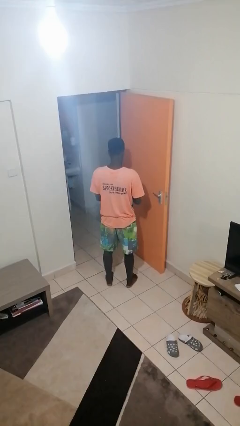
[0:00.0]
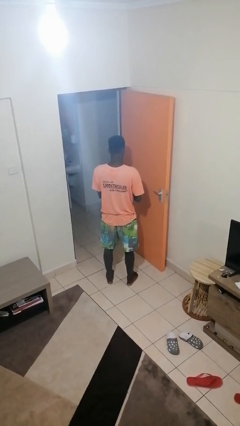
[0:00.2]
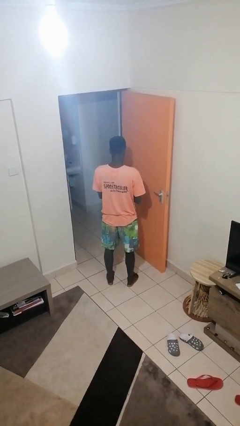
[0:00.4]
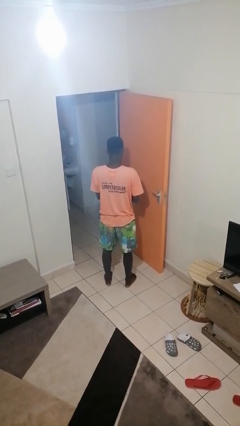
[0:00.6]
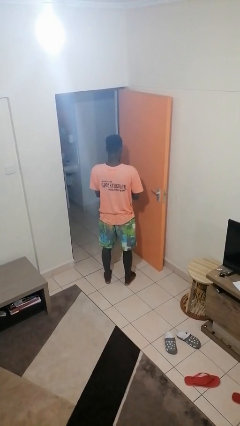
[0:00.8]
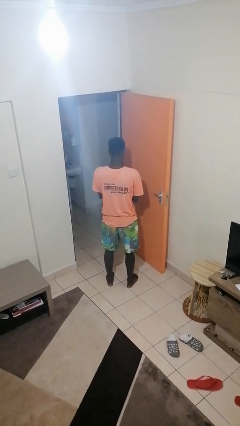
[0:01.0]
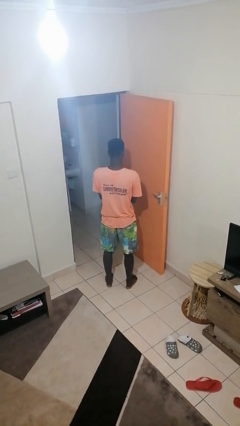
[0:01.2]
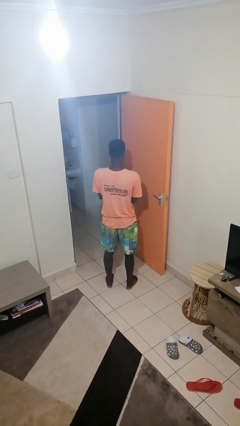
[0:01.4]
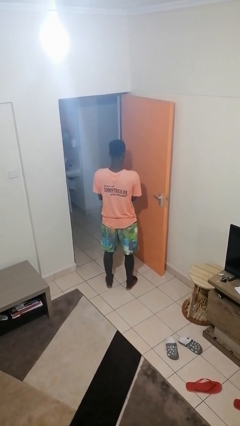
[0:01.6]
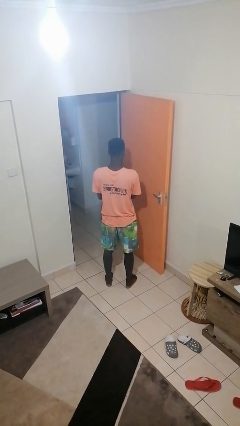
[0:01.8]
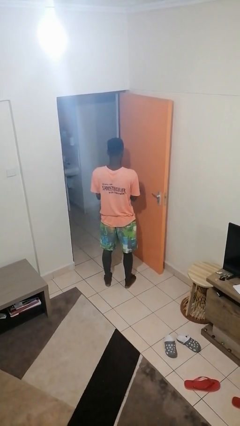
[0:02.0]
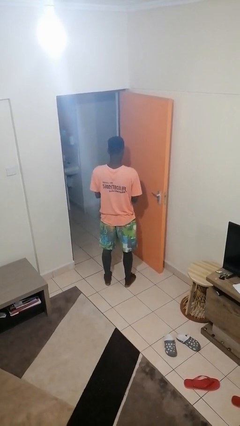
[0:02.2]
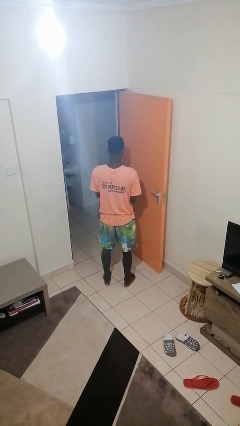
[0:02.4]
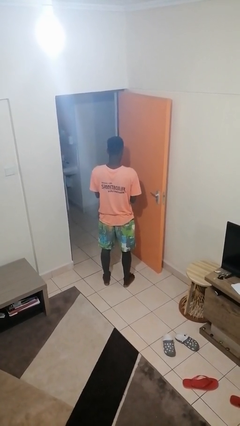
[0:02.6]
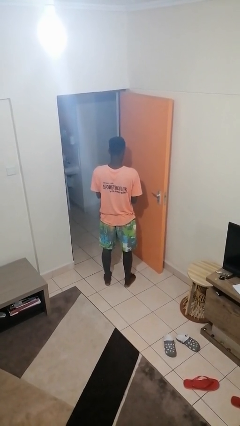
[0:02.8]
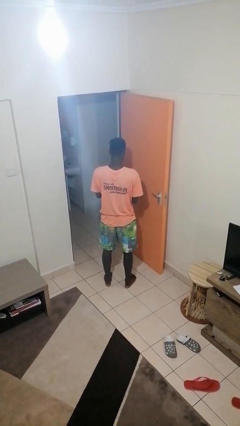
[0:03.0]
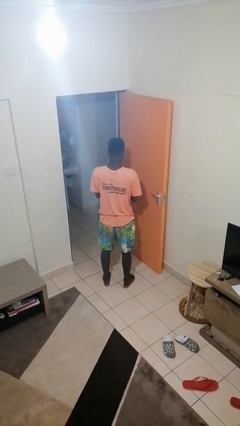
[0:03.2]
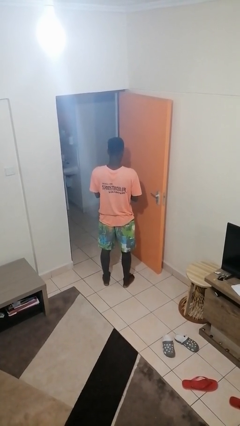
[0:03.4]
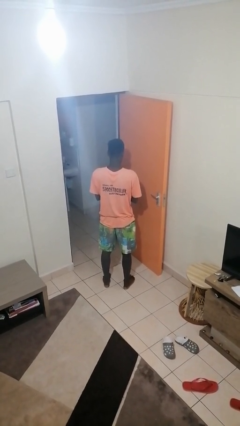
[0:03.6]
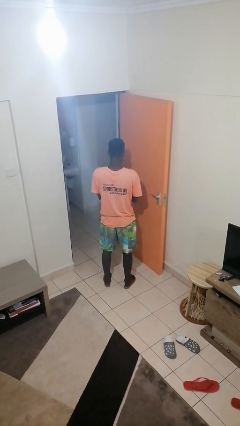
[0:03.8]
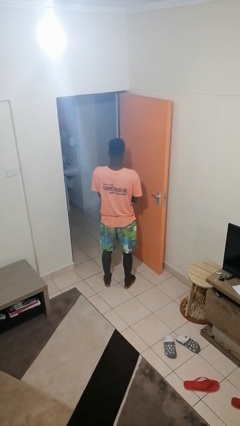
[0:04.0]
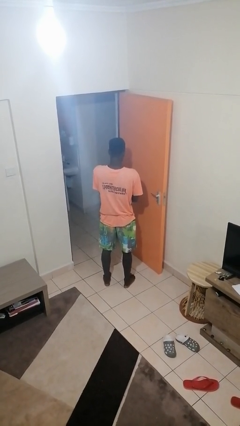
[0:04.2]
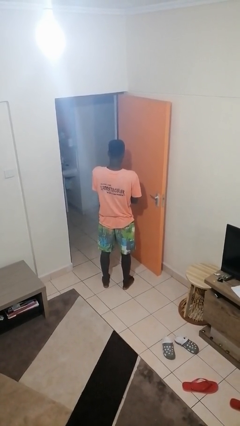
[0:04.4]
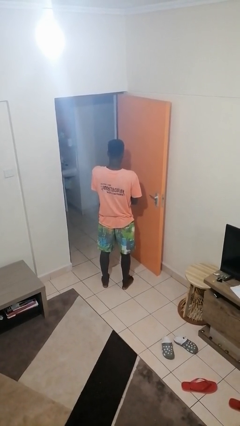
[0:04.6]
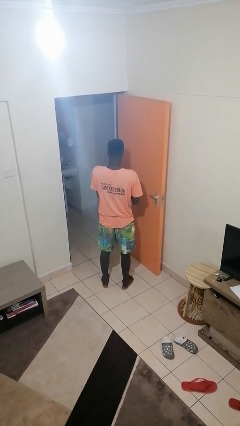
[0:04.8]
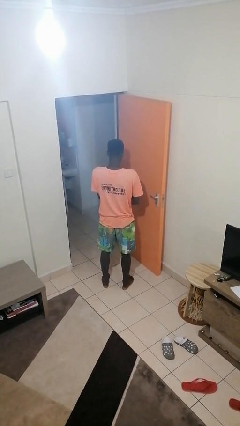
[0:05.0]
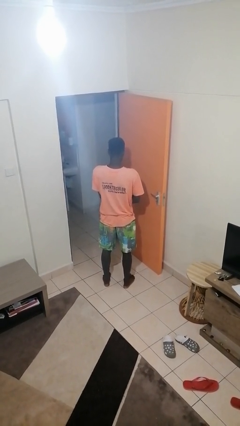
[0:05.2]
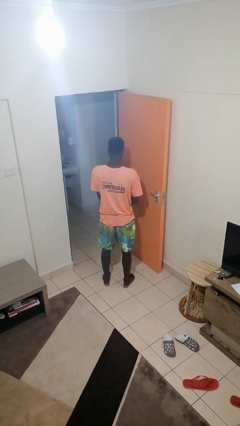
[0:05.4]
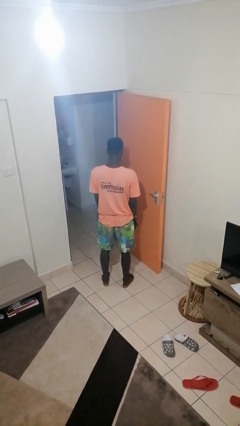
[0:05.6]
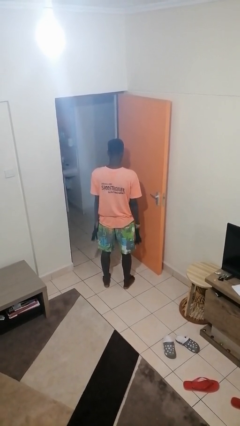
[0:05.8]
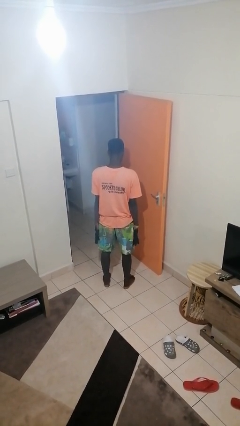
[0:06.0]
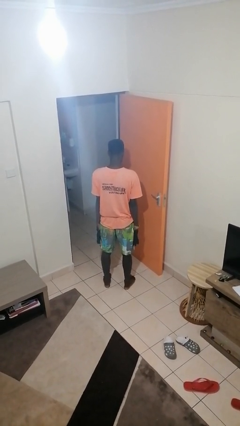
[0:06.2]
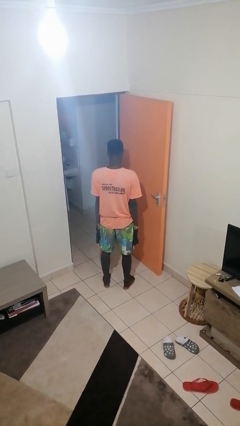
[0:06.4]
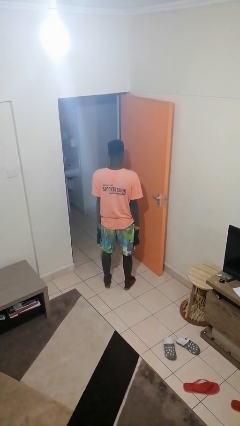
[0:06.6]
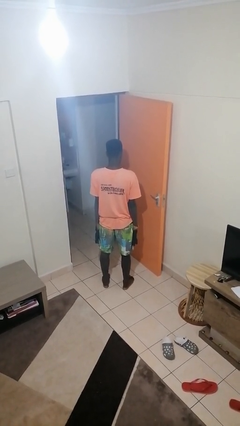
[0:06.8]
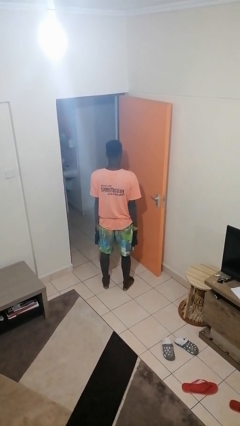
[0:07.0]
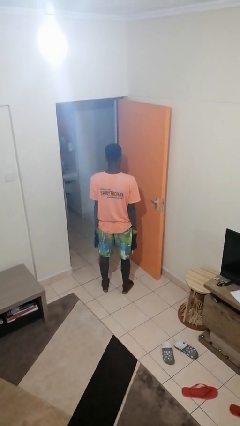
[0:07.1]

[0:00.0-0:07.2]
person puts on gloves

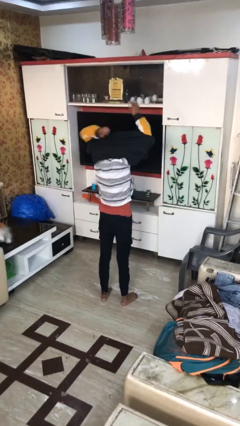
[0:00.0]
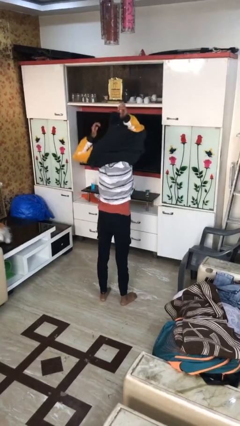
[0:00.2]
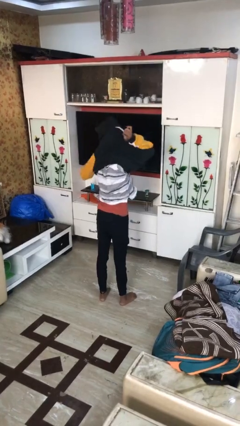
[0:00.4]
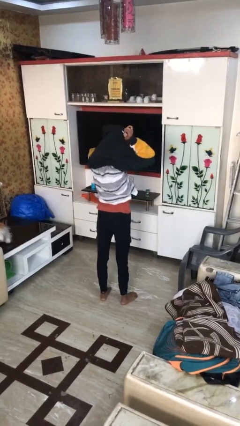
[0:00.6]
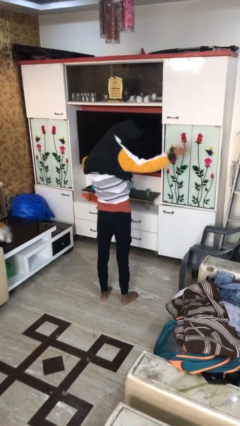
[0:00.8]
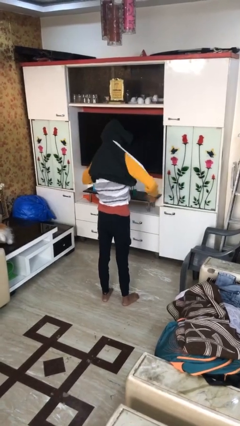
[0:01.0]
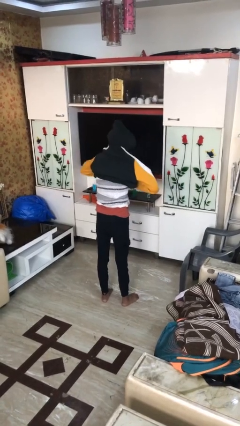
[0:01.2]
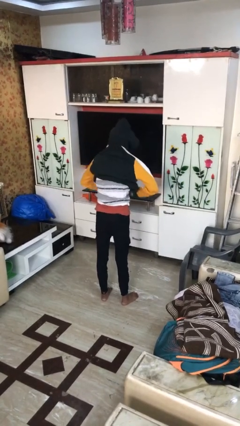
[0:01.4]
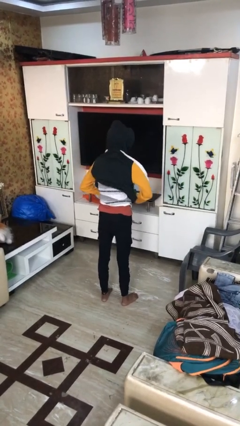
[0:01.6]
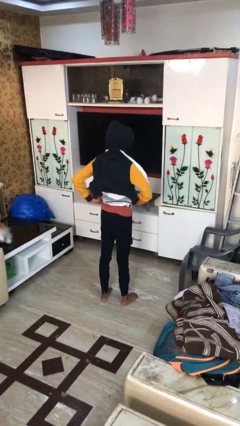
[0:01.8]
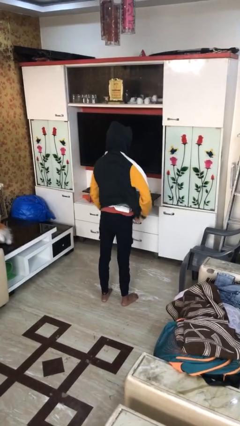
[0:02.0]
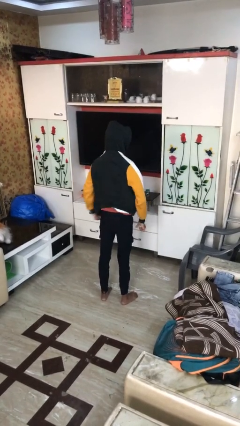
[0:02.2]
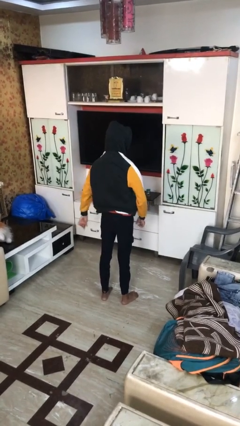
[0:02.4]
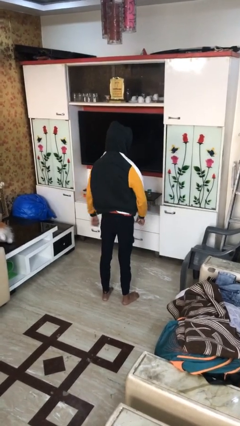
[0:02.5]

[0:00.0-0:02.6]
person puts on hoodie

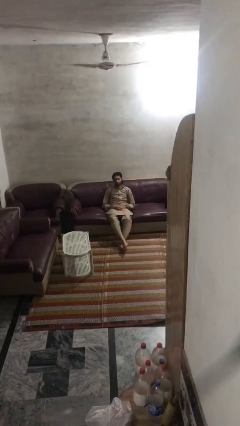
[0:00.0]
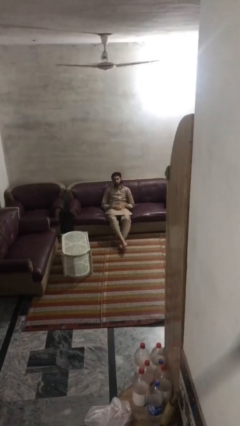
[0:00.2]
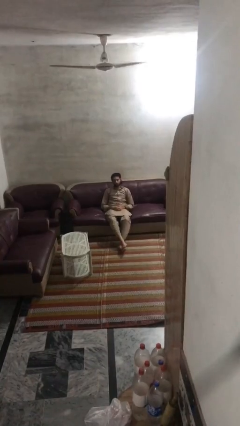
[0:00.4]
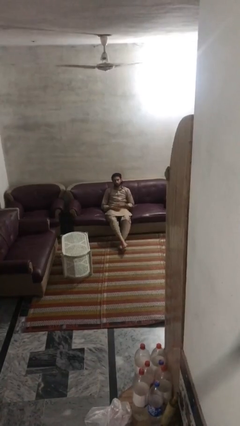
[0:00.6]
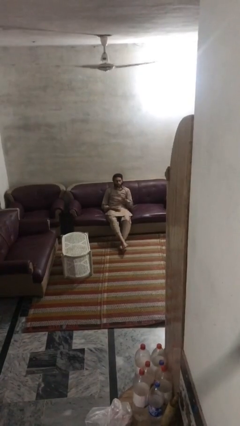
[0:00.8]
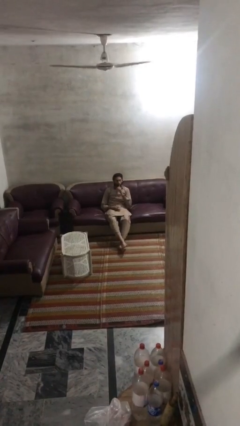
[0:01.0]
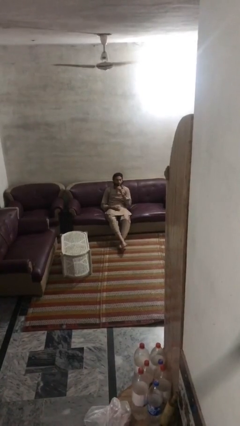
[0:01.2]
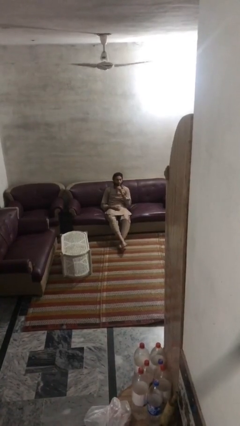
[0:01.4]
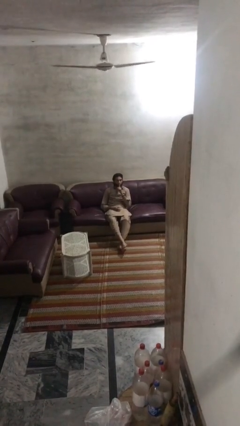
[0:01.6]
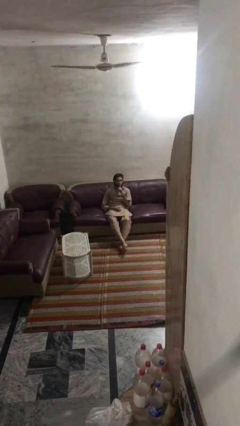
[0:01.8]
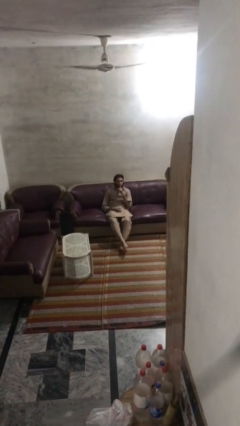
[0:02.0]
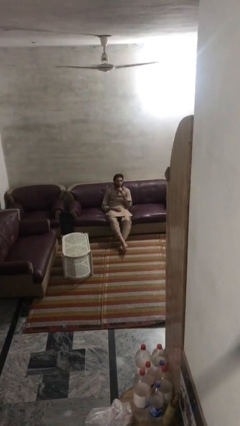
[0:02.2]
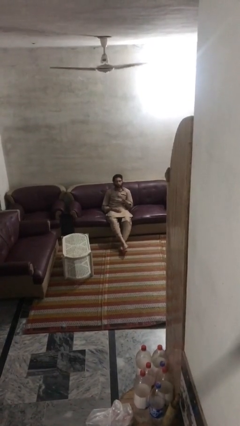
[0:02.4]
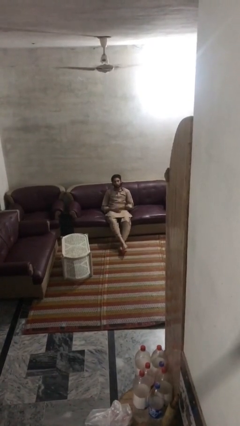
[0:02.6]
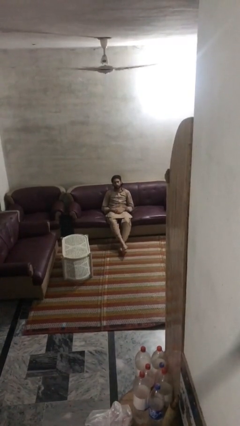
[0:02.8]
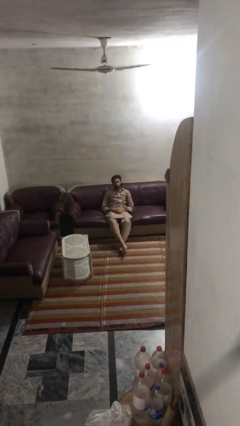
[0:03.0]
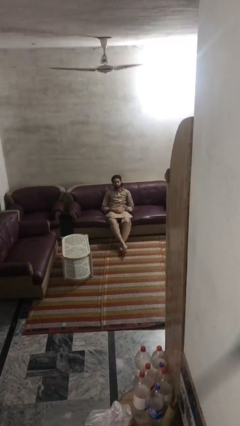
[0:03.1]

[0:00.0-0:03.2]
person gestures be quiet

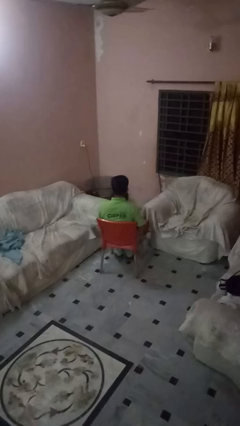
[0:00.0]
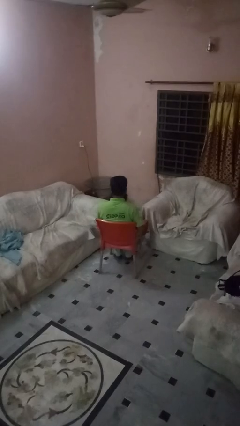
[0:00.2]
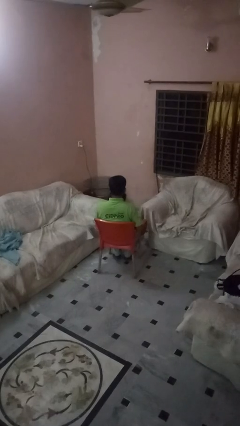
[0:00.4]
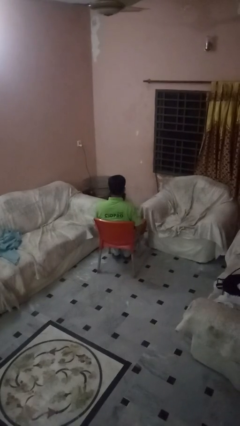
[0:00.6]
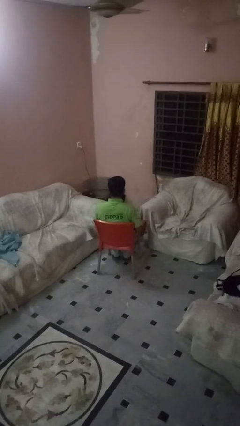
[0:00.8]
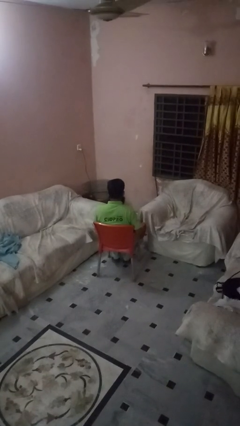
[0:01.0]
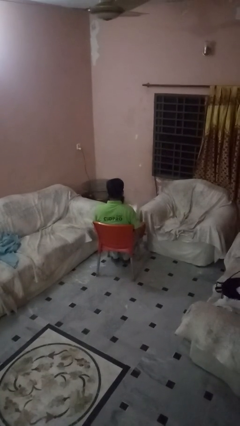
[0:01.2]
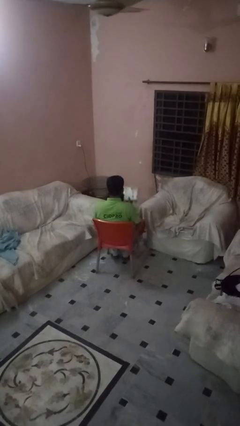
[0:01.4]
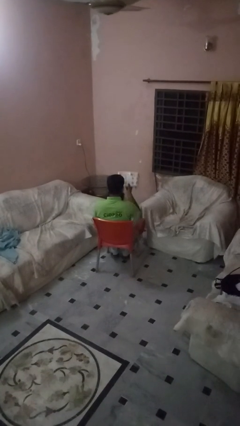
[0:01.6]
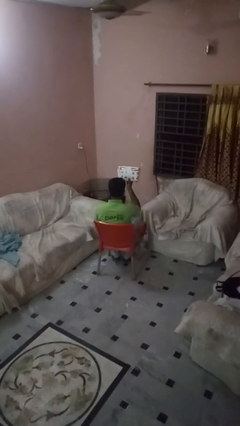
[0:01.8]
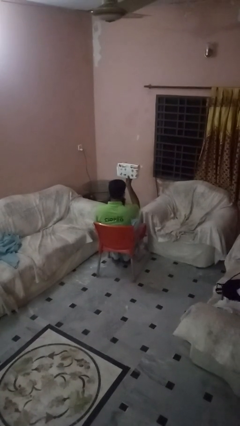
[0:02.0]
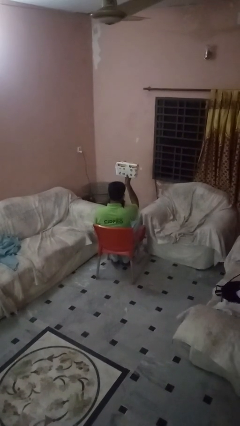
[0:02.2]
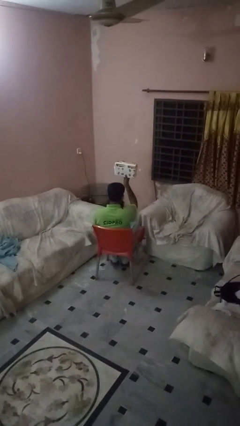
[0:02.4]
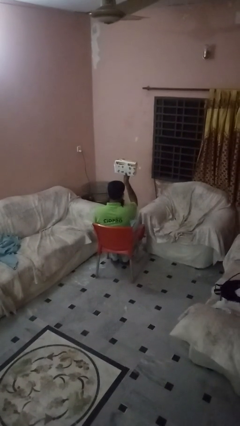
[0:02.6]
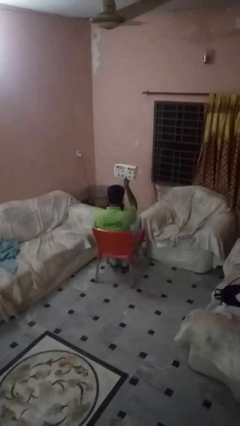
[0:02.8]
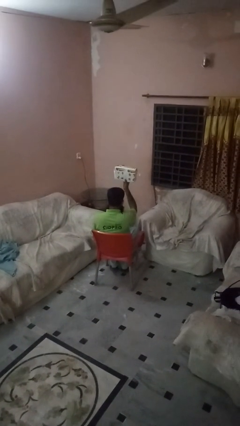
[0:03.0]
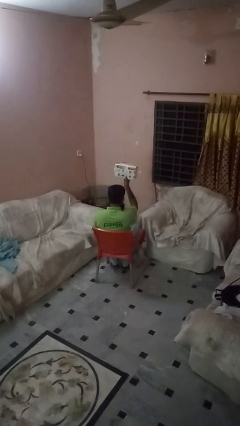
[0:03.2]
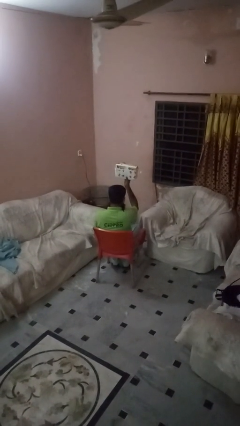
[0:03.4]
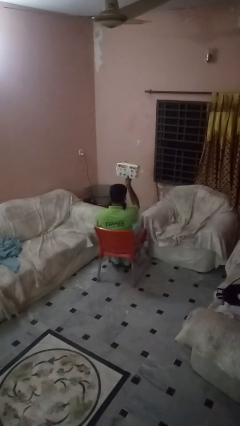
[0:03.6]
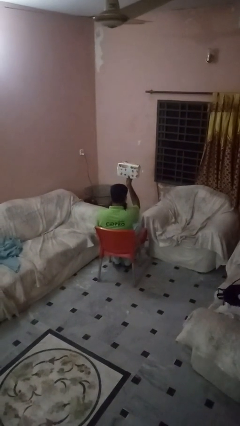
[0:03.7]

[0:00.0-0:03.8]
person holds object above head

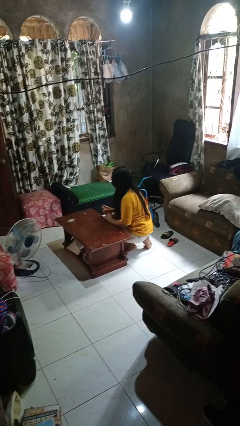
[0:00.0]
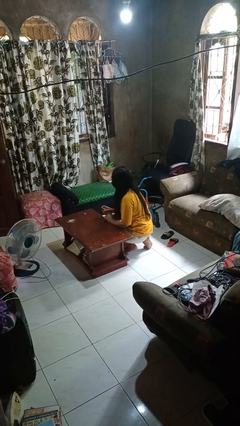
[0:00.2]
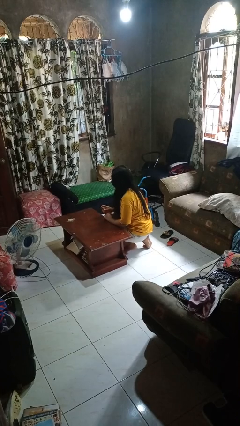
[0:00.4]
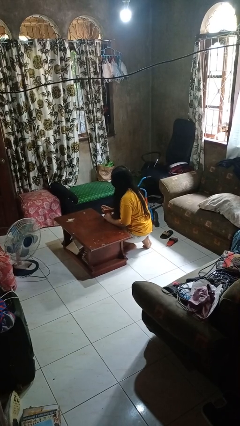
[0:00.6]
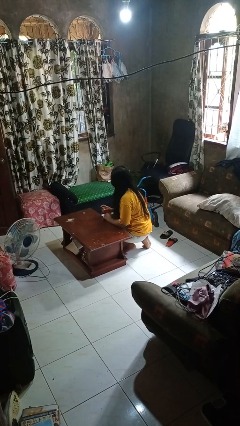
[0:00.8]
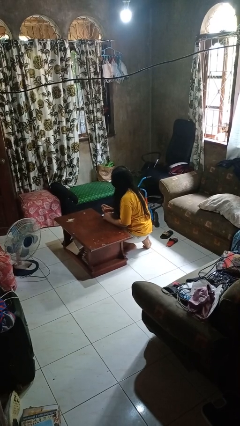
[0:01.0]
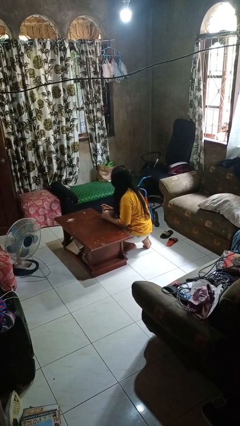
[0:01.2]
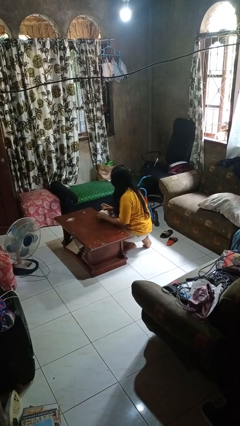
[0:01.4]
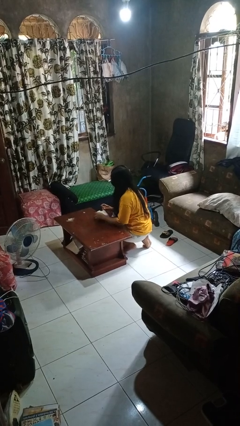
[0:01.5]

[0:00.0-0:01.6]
person sprays from bottle
